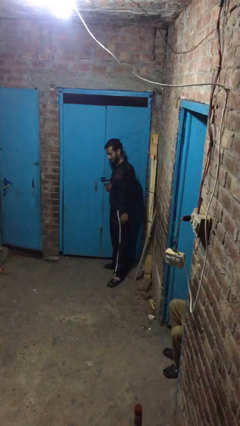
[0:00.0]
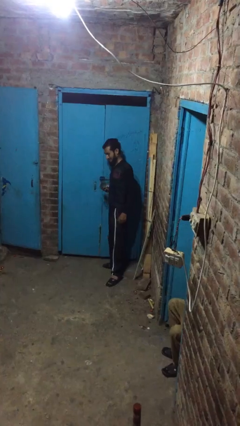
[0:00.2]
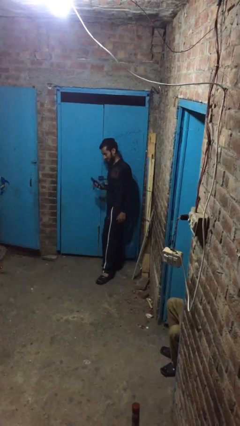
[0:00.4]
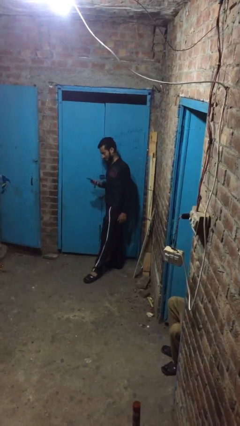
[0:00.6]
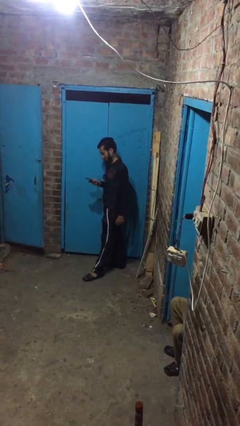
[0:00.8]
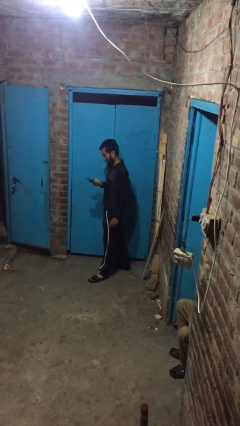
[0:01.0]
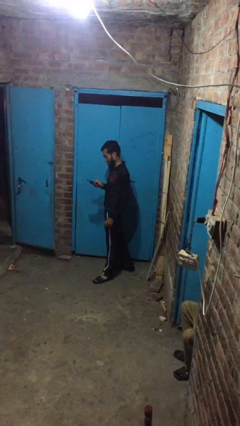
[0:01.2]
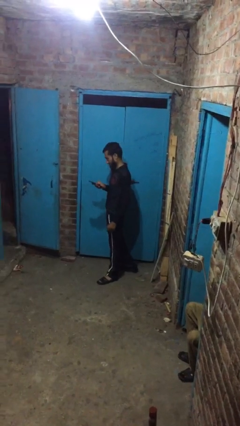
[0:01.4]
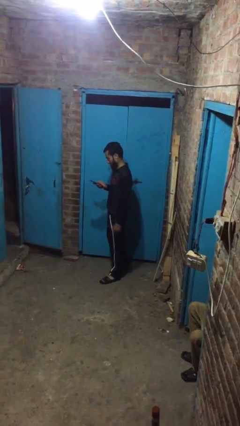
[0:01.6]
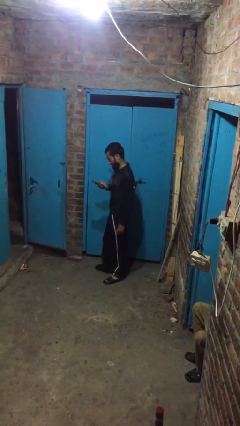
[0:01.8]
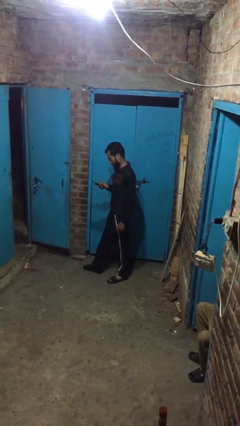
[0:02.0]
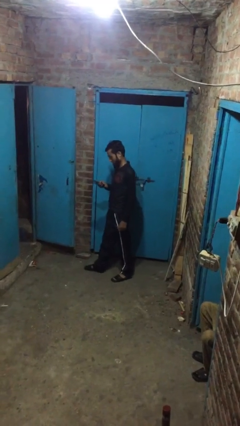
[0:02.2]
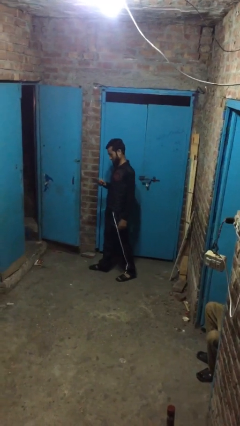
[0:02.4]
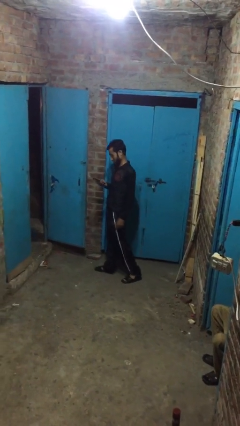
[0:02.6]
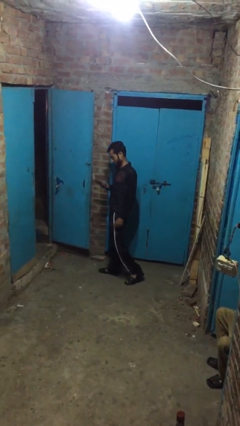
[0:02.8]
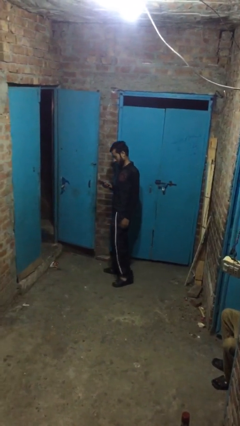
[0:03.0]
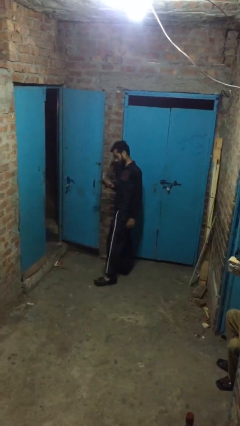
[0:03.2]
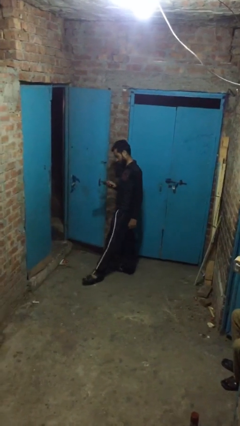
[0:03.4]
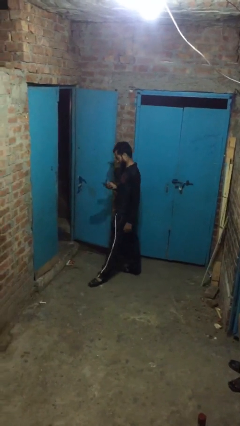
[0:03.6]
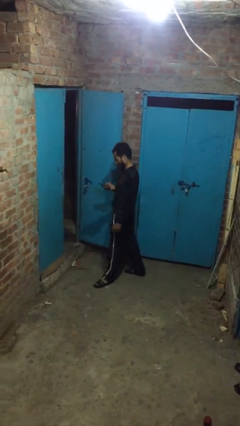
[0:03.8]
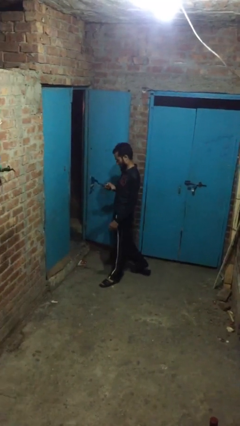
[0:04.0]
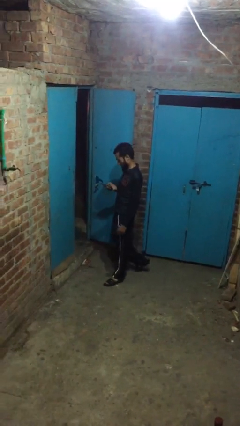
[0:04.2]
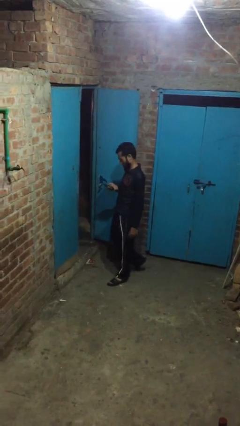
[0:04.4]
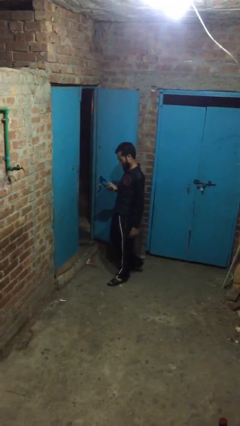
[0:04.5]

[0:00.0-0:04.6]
person texts on phone

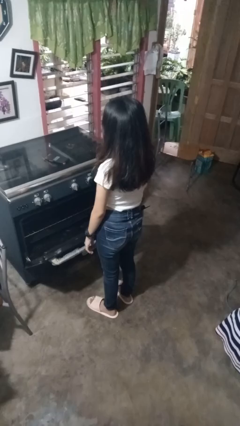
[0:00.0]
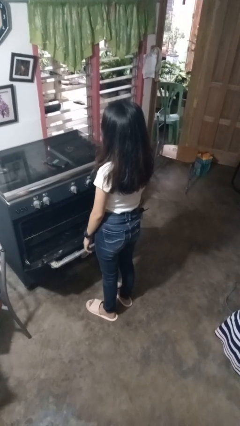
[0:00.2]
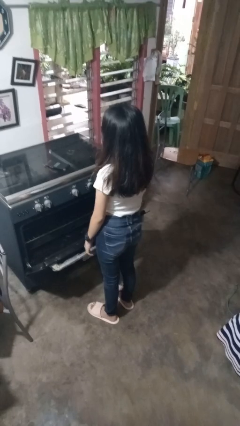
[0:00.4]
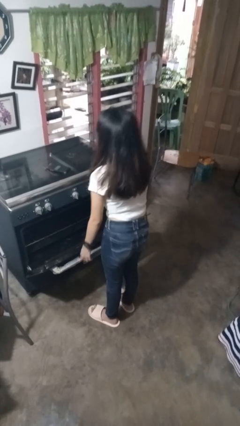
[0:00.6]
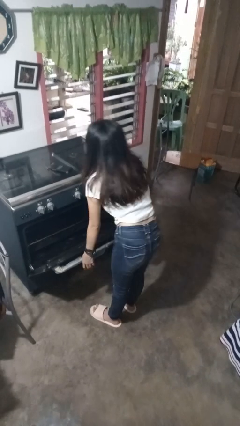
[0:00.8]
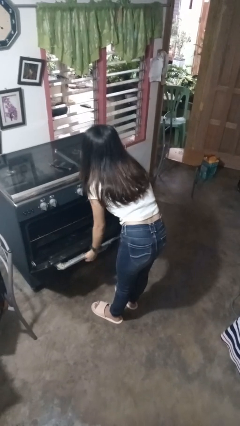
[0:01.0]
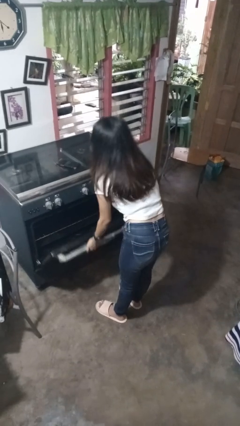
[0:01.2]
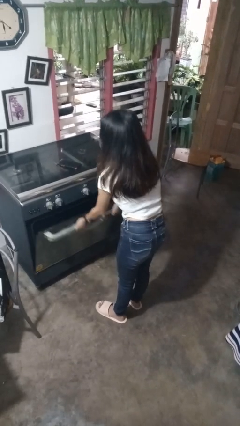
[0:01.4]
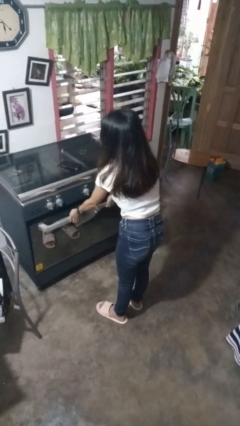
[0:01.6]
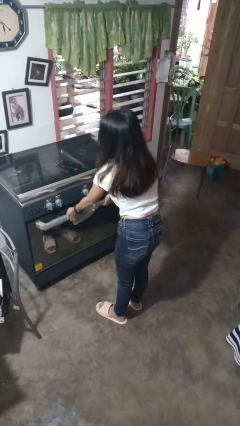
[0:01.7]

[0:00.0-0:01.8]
person closes oven door

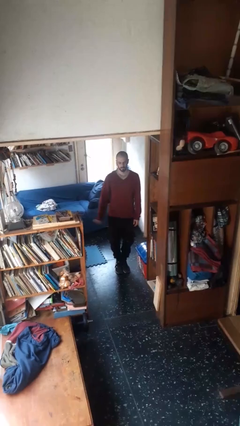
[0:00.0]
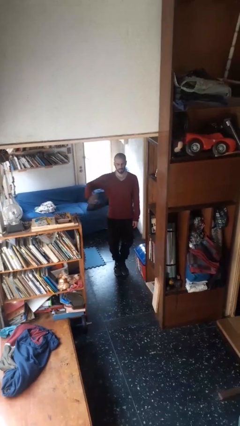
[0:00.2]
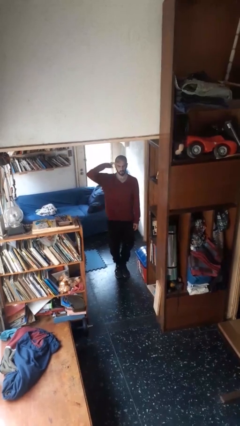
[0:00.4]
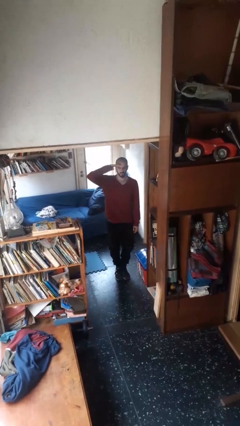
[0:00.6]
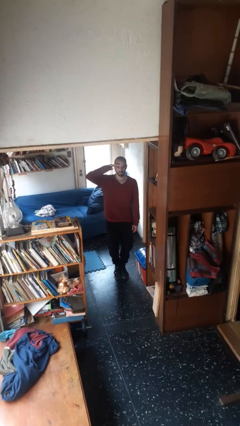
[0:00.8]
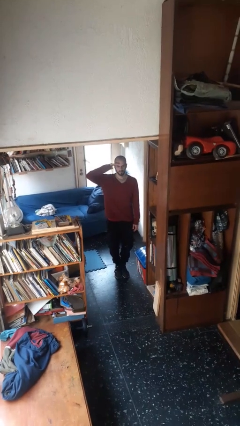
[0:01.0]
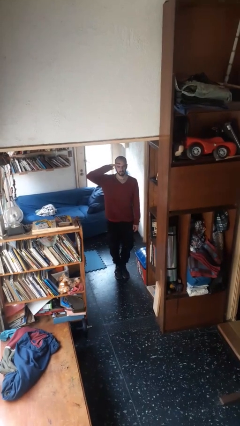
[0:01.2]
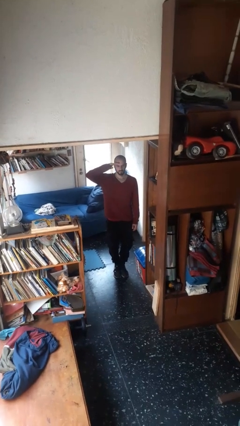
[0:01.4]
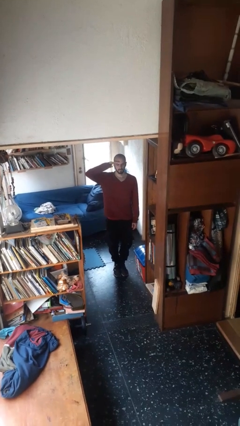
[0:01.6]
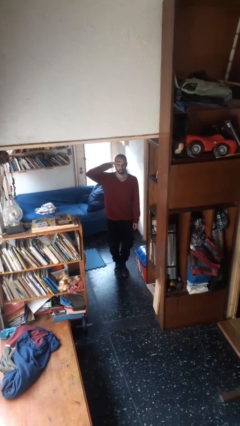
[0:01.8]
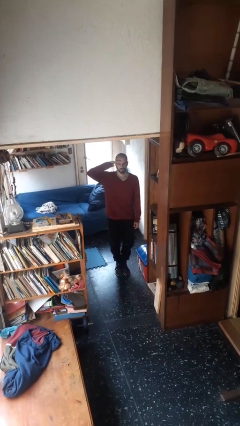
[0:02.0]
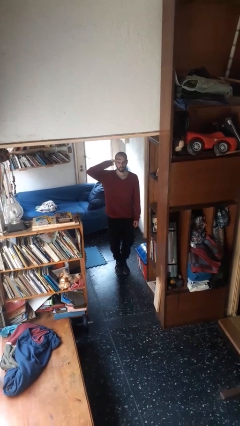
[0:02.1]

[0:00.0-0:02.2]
person salutes

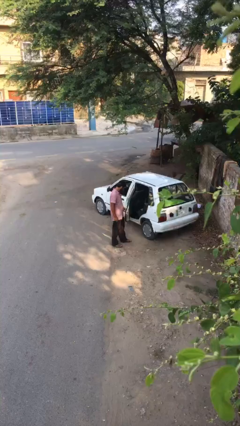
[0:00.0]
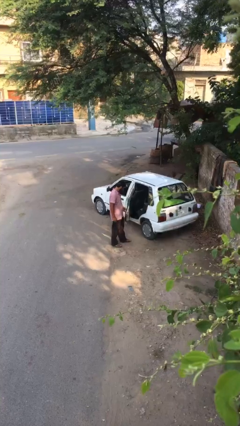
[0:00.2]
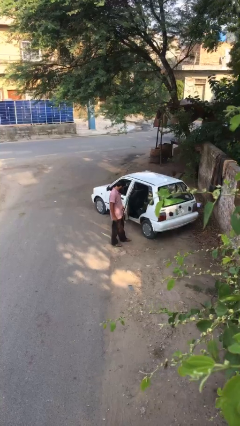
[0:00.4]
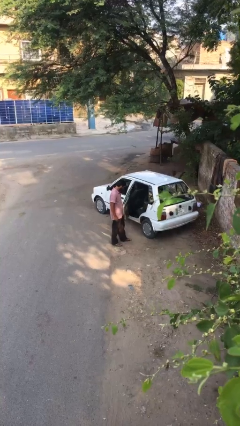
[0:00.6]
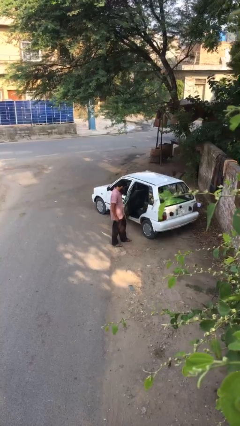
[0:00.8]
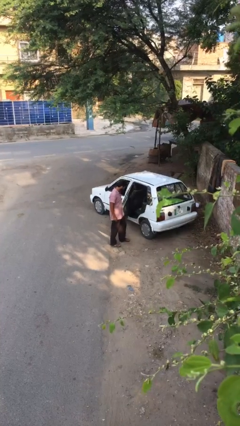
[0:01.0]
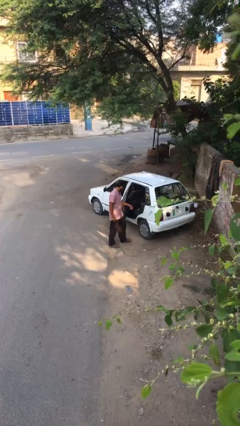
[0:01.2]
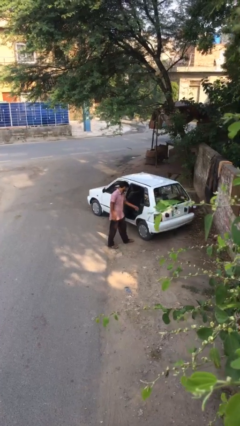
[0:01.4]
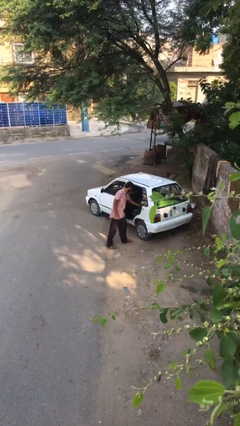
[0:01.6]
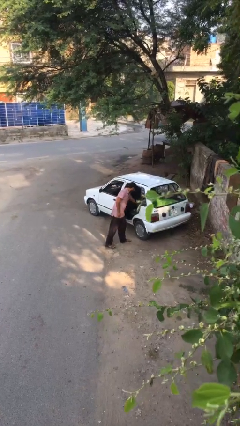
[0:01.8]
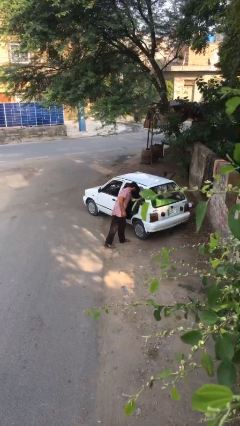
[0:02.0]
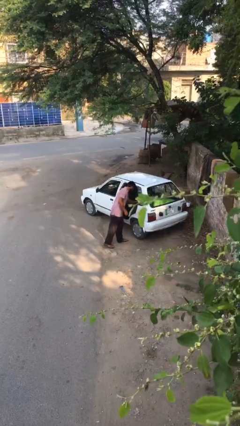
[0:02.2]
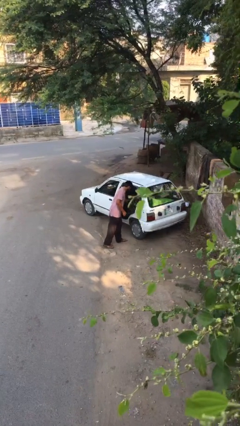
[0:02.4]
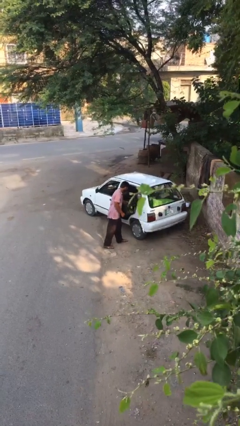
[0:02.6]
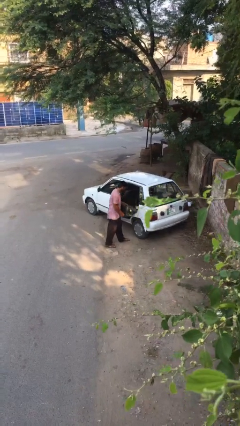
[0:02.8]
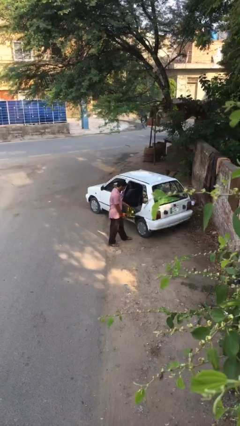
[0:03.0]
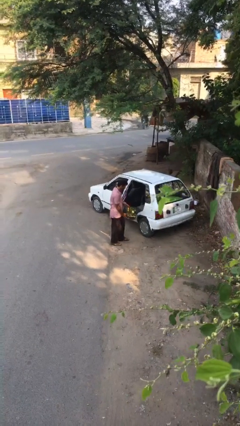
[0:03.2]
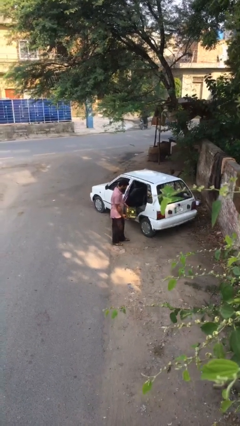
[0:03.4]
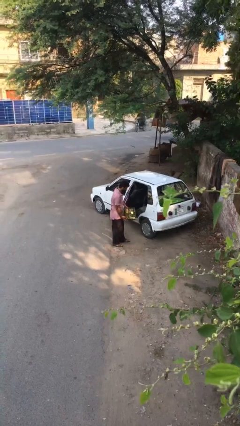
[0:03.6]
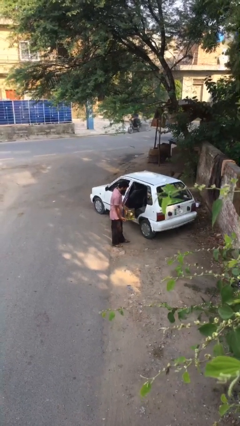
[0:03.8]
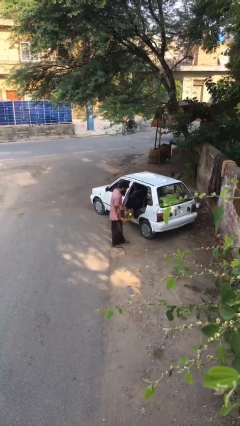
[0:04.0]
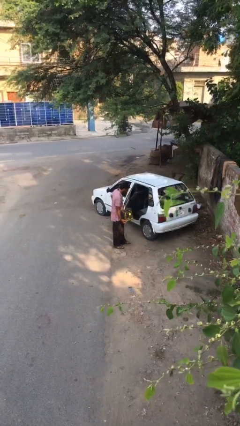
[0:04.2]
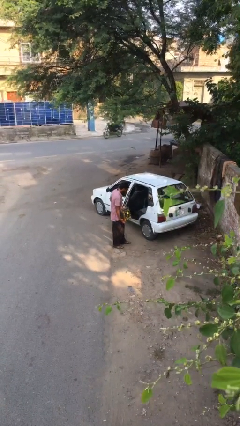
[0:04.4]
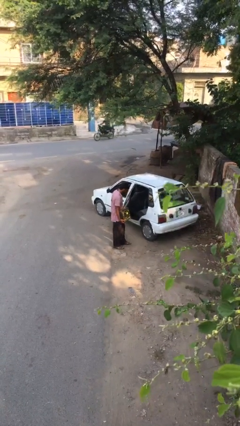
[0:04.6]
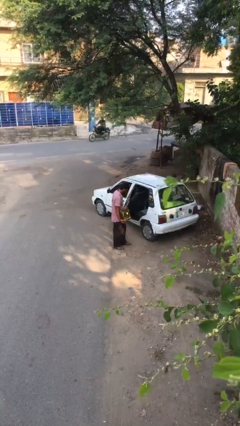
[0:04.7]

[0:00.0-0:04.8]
person unloads car

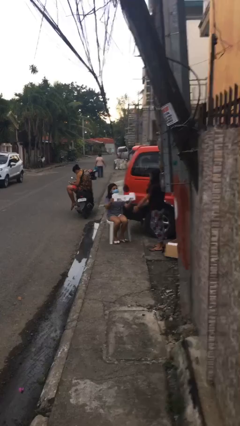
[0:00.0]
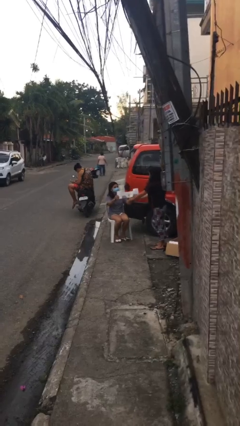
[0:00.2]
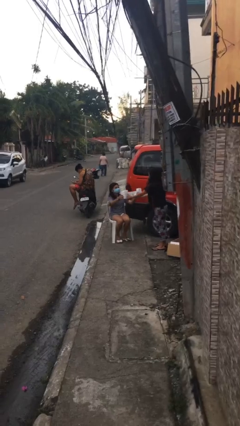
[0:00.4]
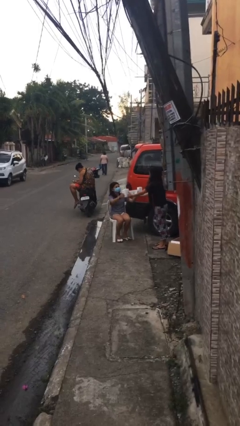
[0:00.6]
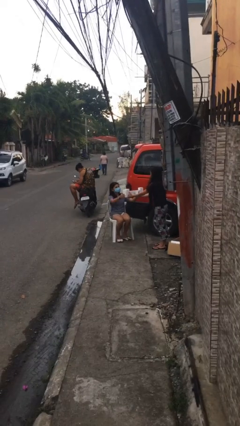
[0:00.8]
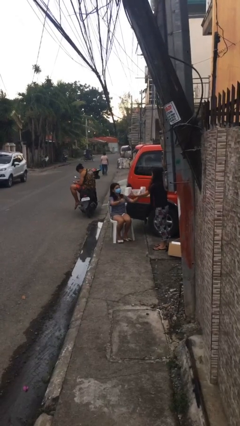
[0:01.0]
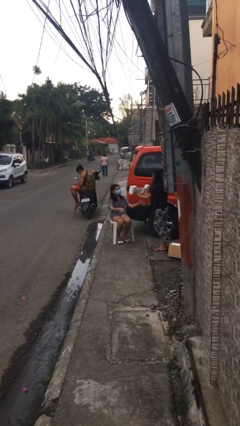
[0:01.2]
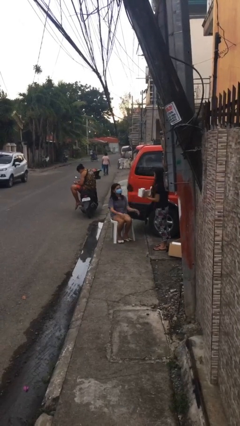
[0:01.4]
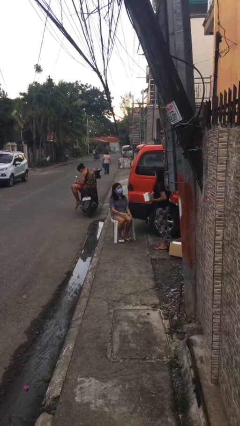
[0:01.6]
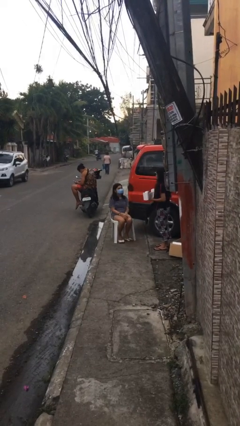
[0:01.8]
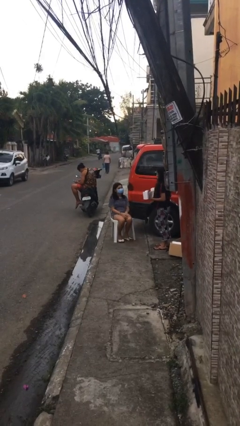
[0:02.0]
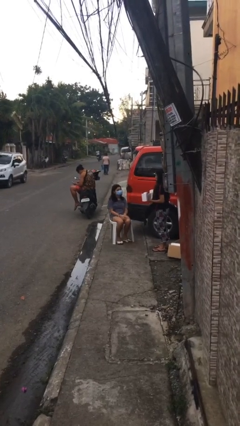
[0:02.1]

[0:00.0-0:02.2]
person transfers object to person

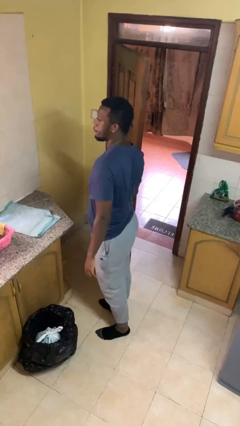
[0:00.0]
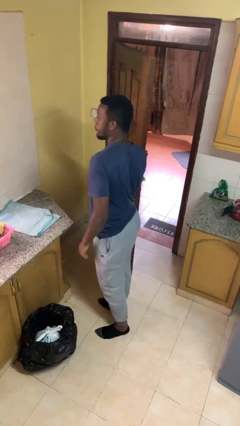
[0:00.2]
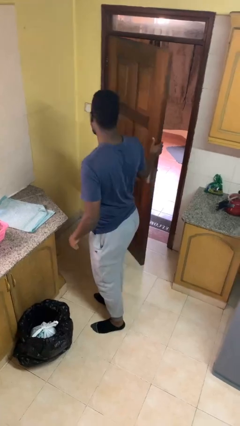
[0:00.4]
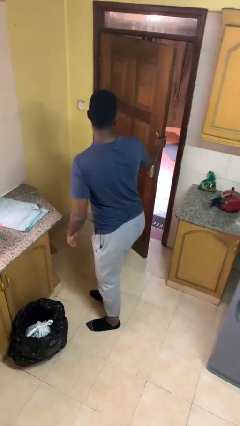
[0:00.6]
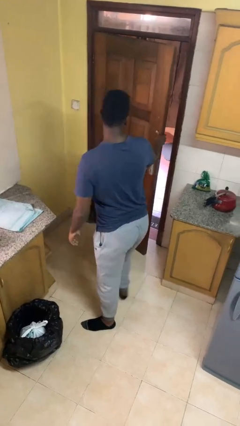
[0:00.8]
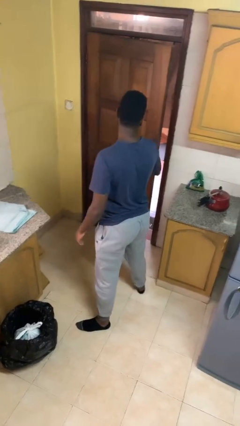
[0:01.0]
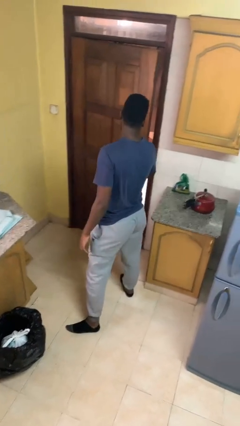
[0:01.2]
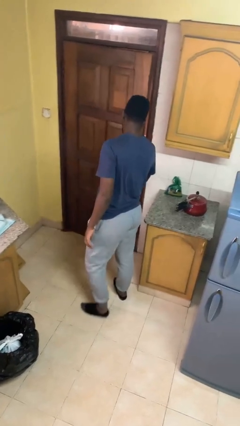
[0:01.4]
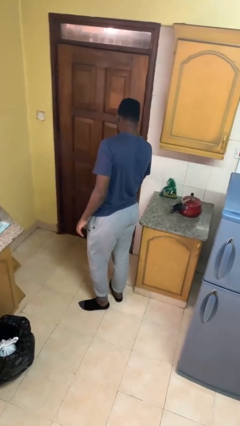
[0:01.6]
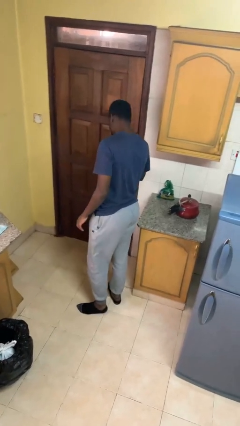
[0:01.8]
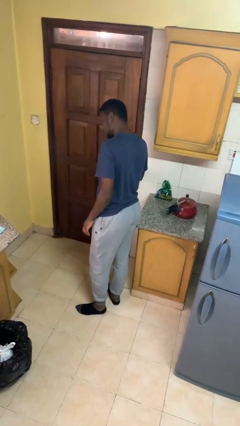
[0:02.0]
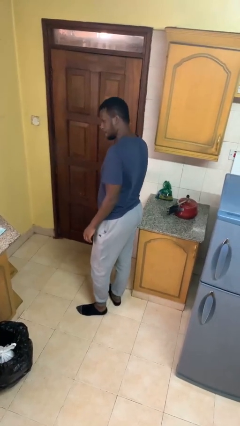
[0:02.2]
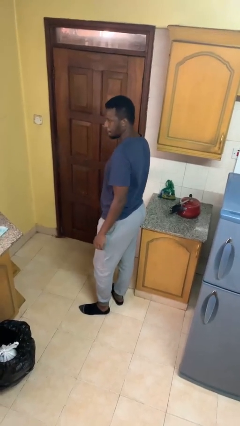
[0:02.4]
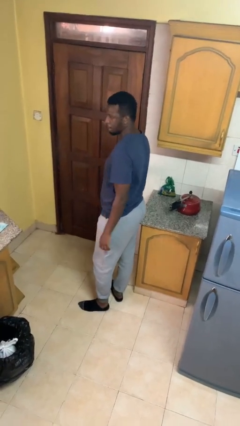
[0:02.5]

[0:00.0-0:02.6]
person closes facility door
